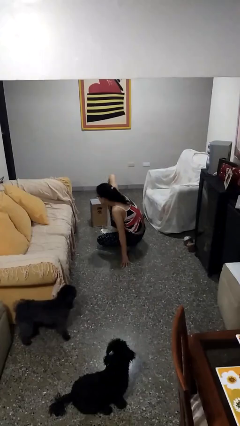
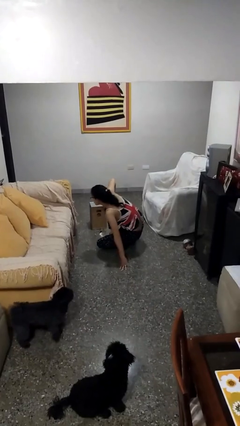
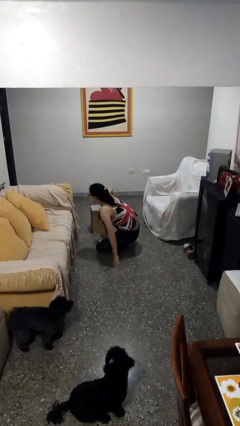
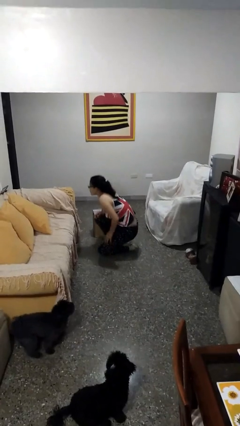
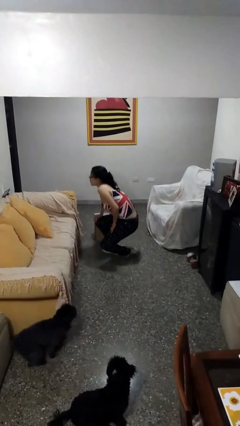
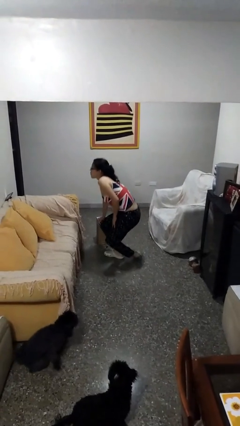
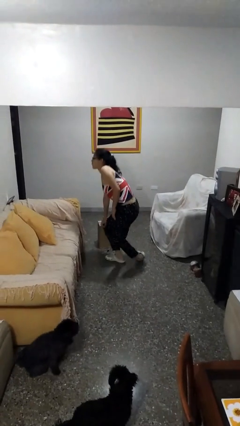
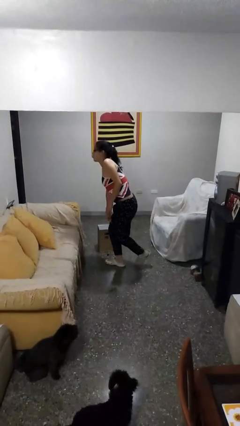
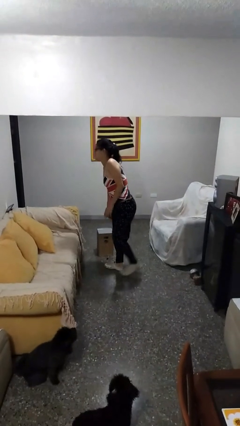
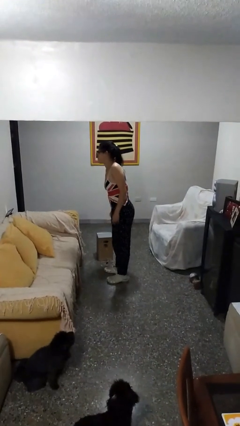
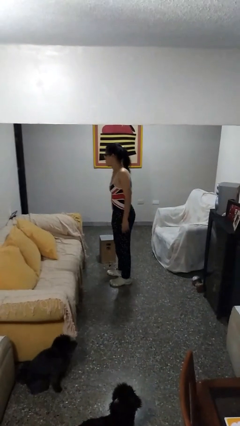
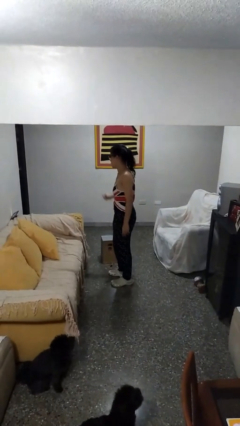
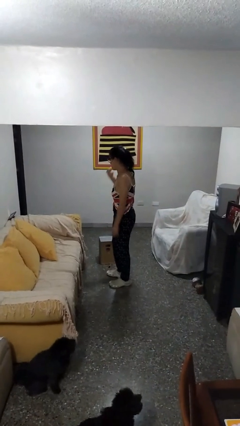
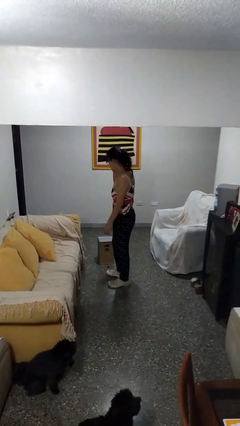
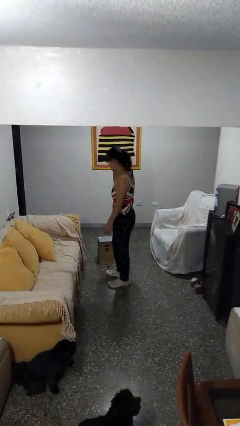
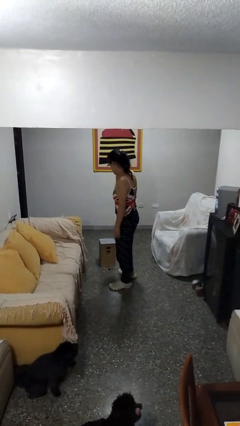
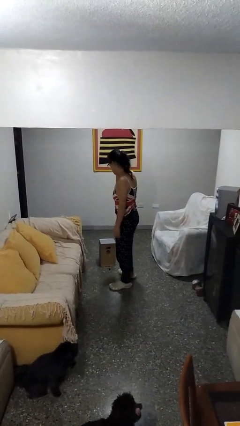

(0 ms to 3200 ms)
person stands up from floor

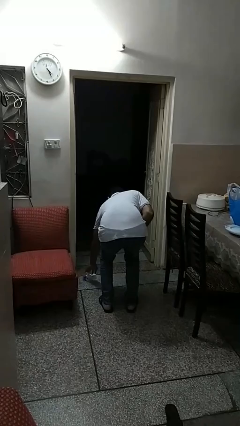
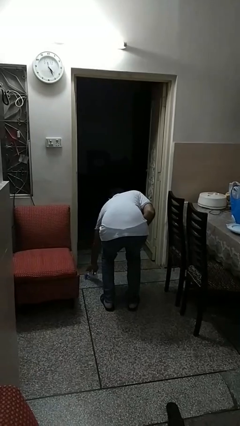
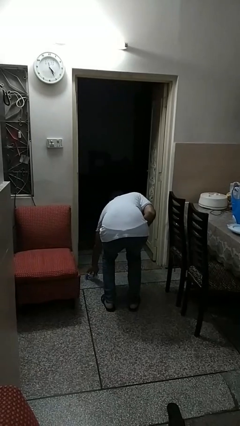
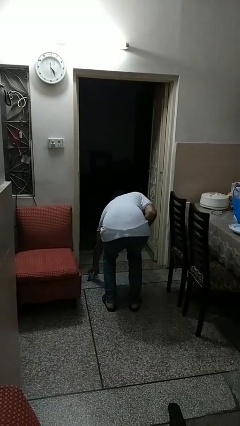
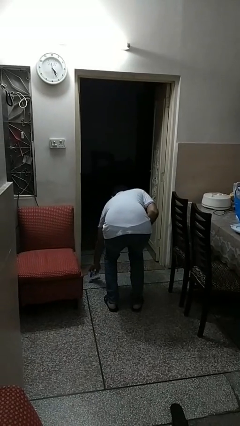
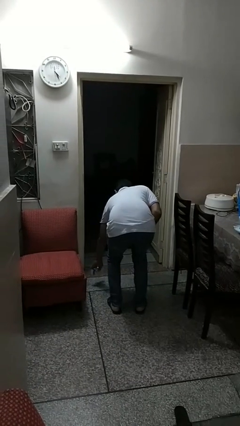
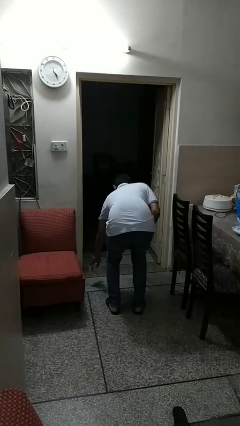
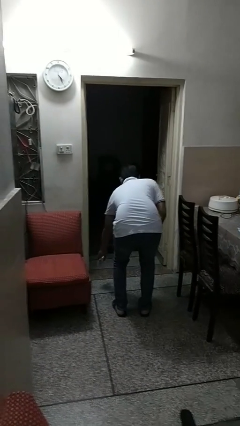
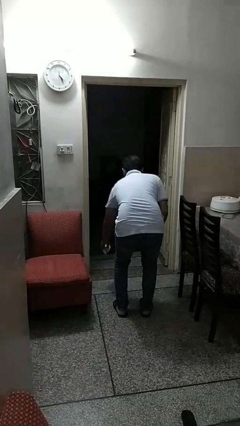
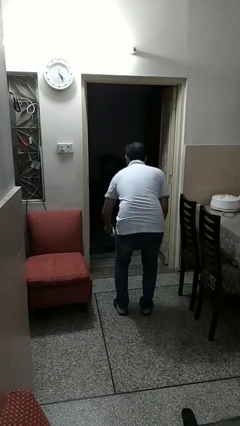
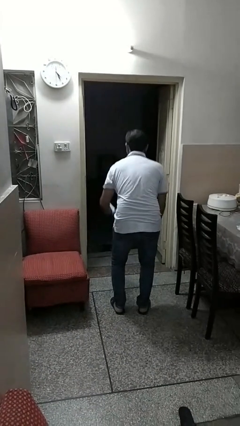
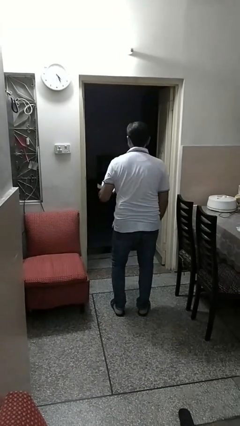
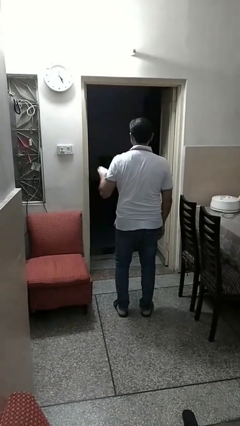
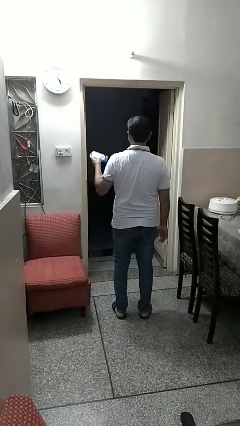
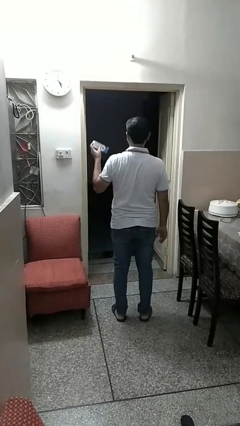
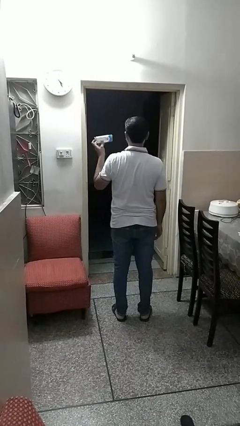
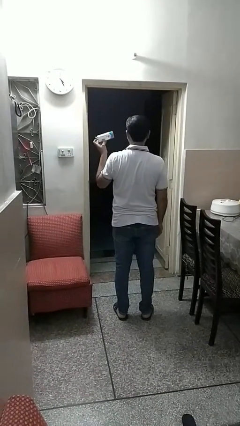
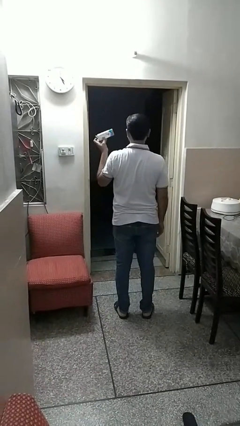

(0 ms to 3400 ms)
person picks up object from floor

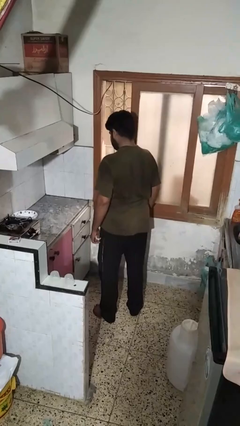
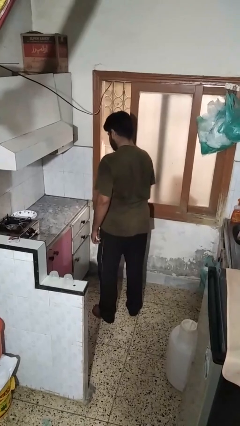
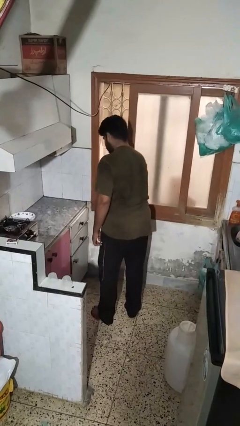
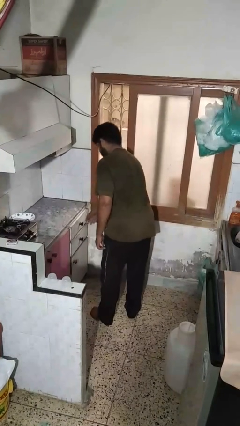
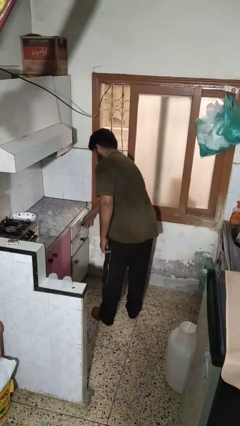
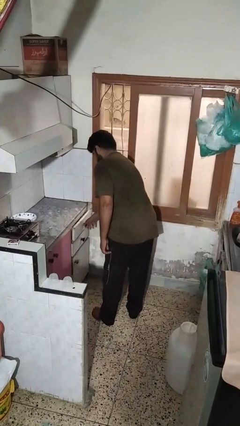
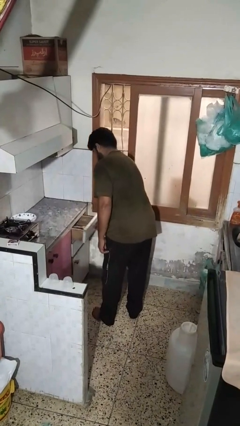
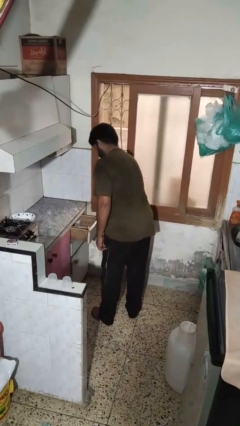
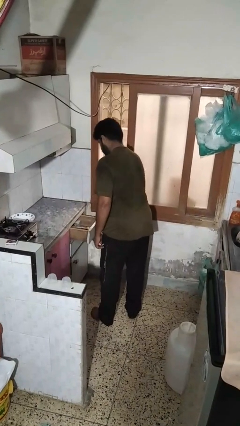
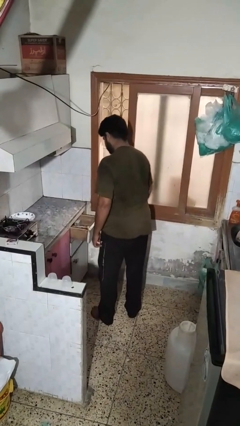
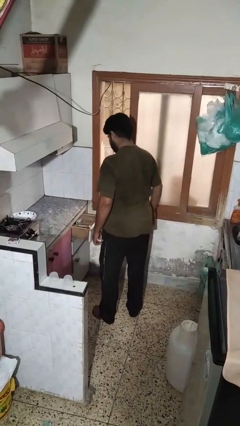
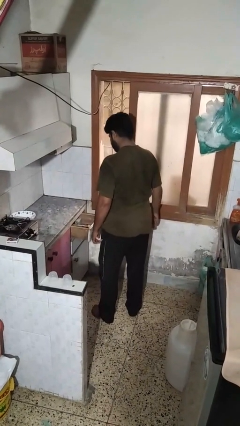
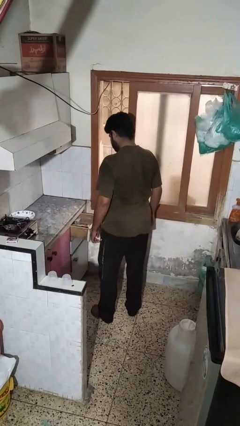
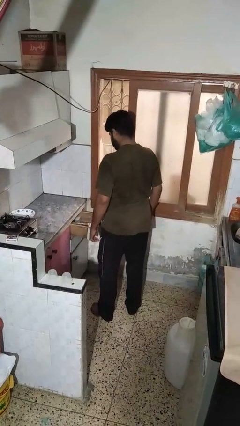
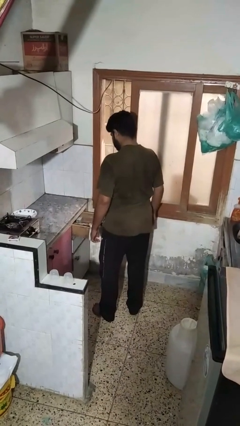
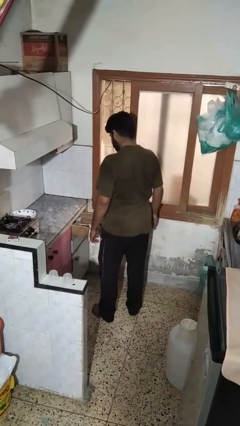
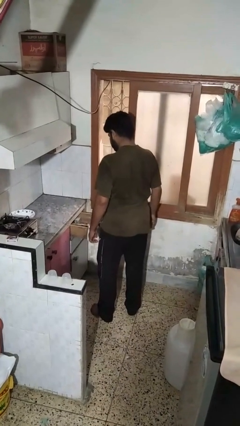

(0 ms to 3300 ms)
person opens kitchen drawer

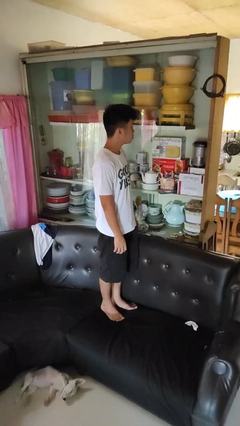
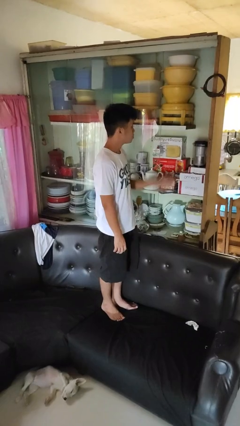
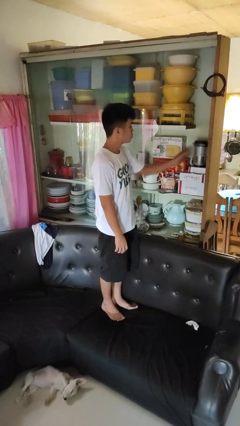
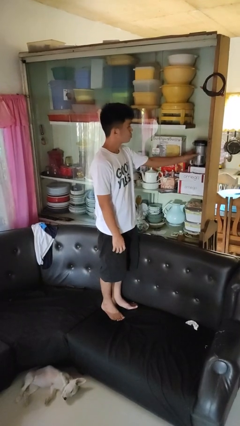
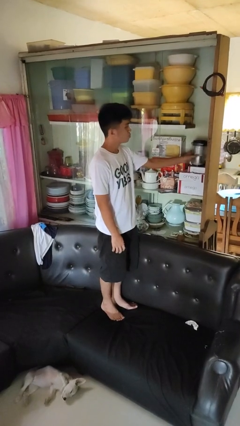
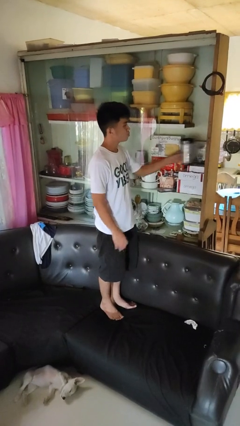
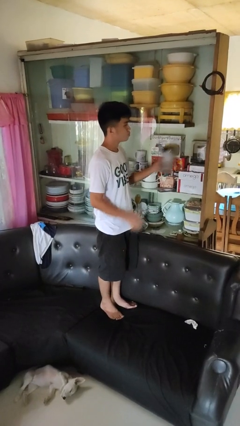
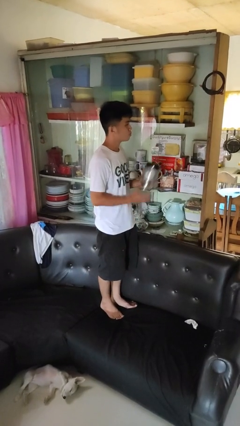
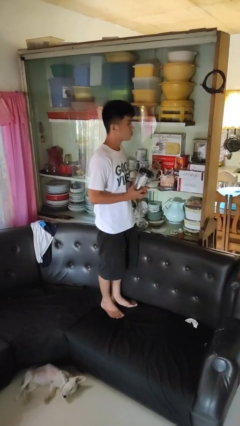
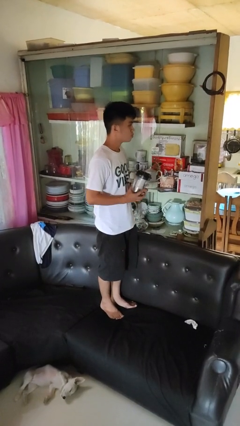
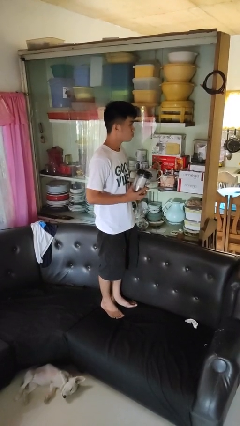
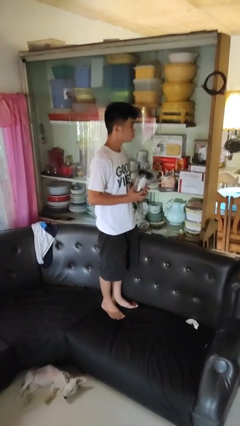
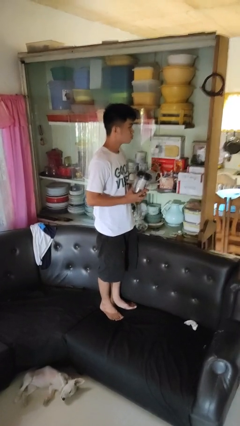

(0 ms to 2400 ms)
person picks up object from cabinet

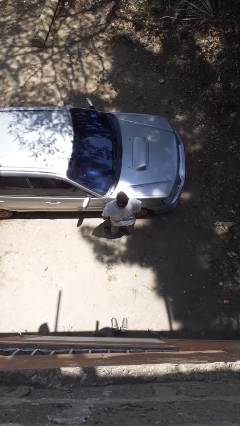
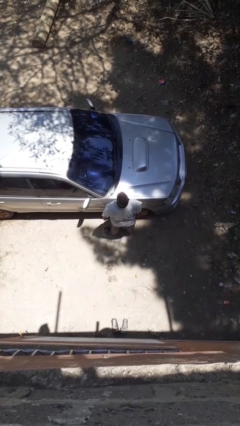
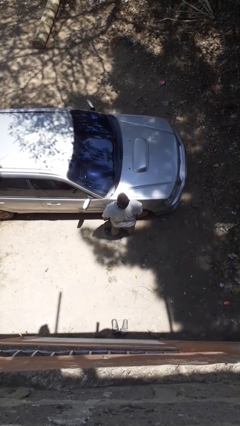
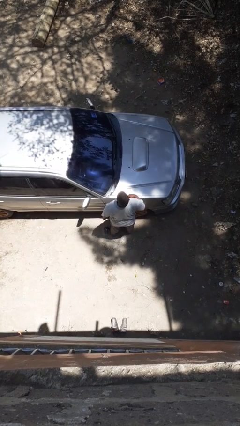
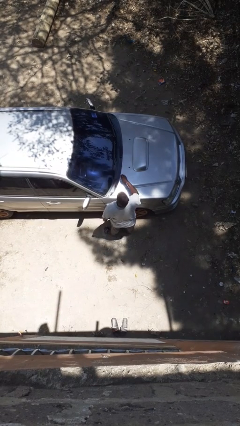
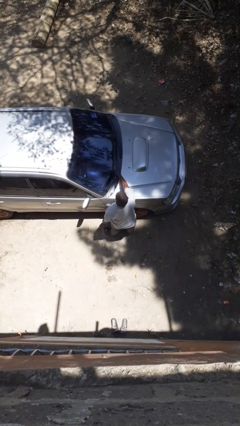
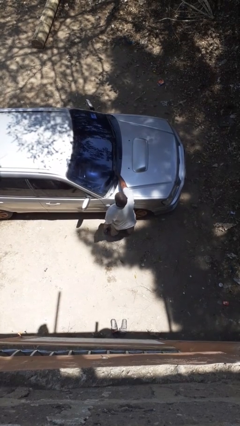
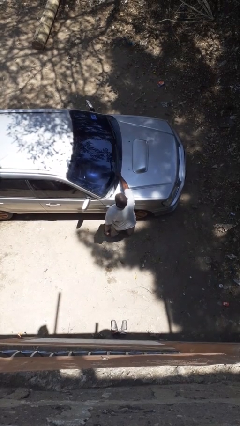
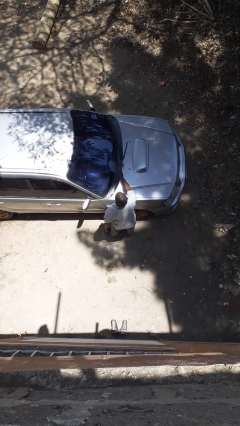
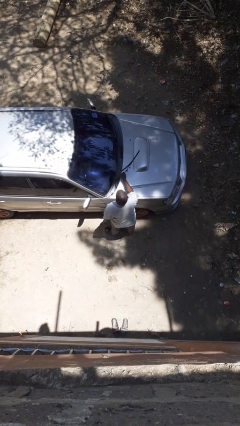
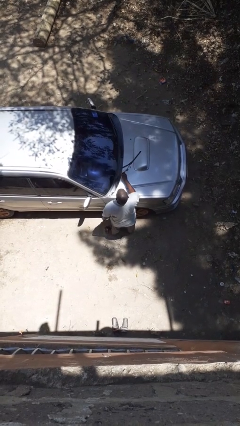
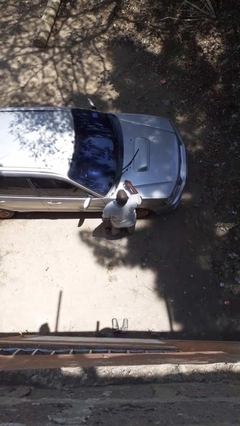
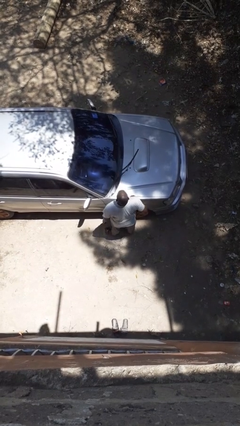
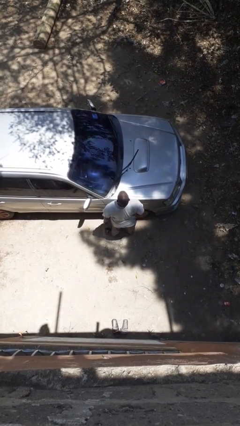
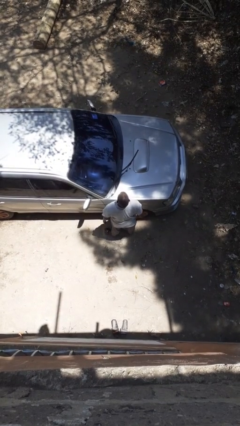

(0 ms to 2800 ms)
person flips up car wipers

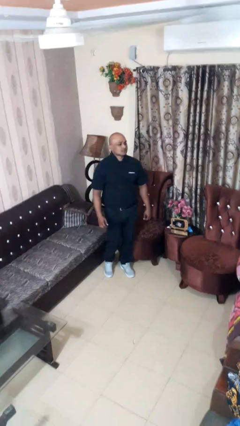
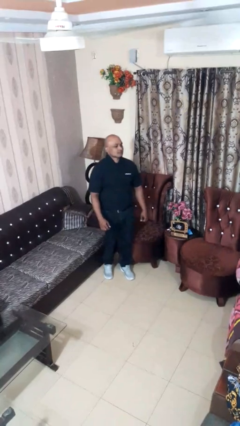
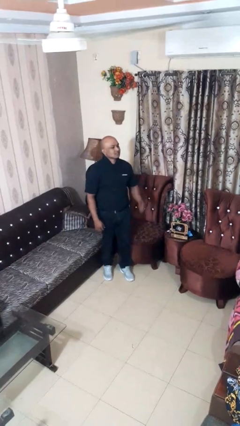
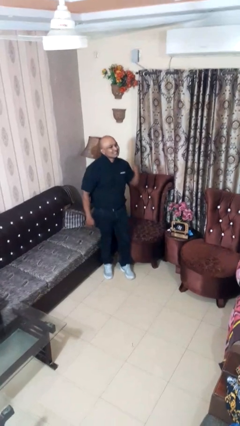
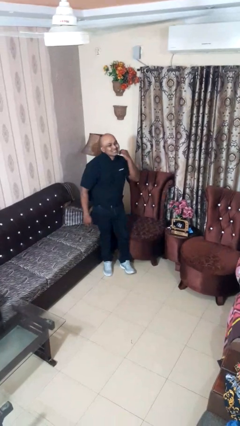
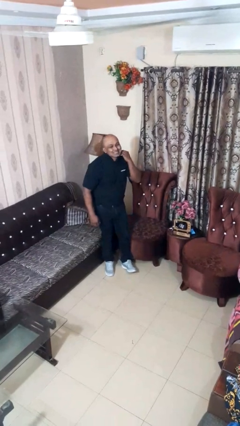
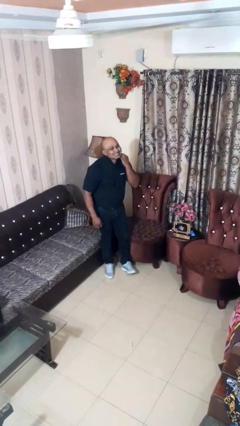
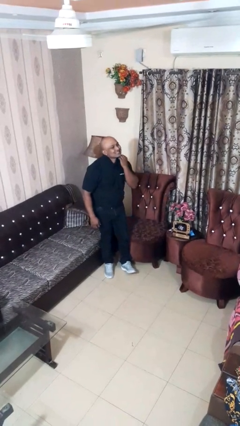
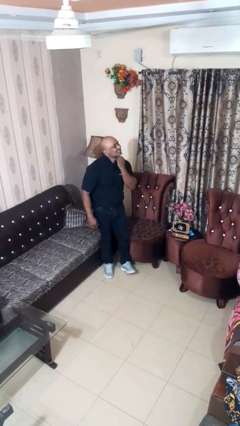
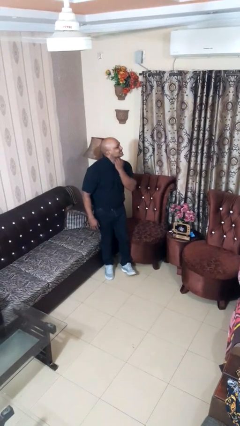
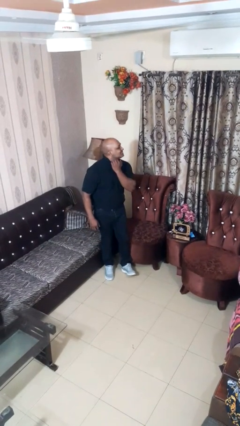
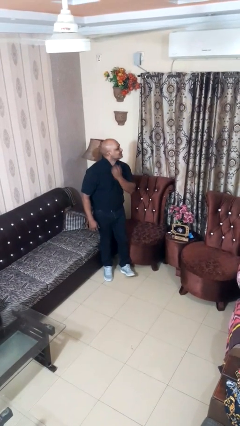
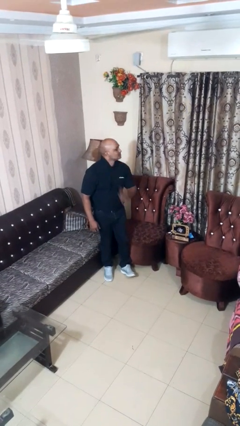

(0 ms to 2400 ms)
person gestures cut
